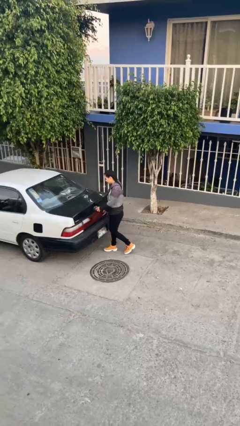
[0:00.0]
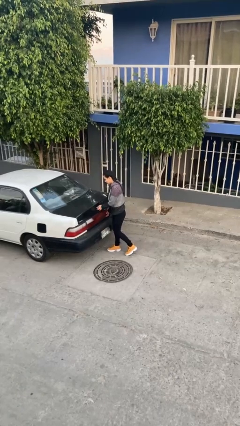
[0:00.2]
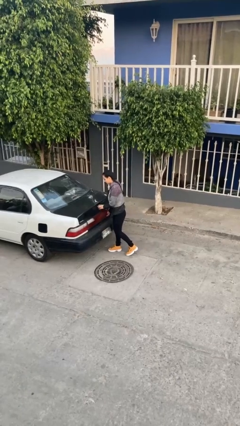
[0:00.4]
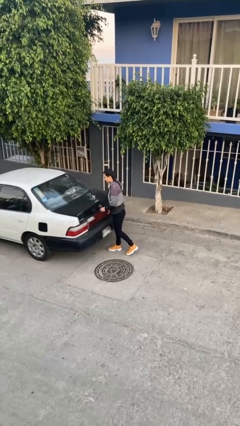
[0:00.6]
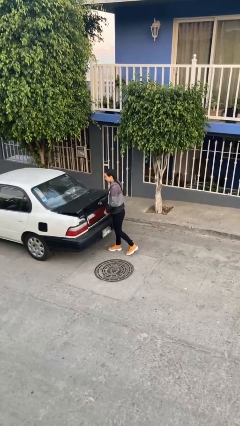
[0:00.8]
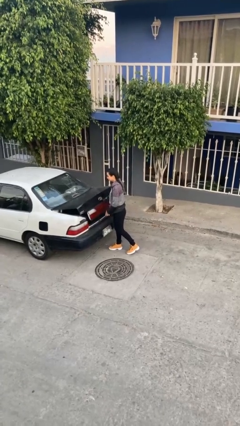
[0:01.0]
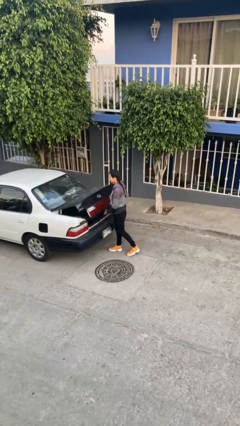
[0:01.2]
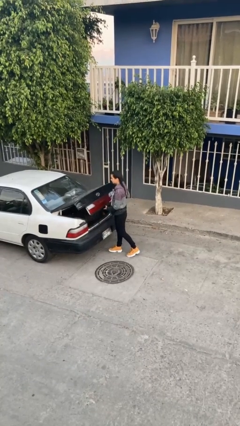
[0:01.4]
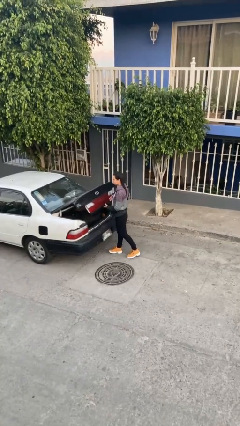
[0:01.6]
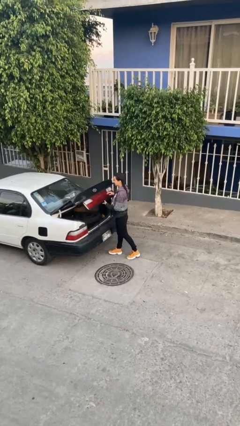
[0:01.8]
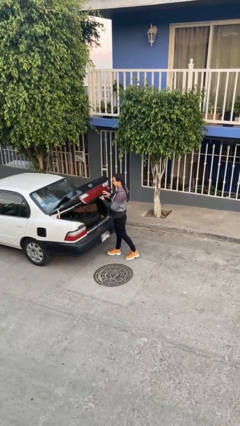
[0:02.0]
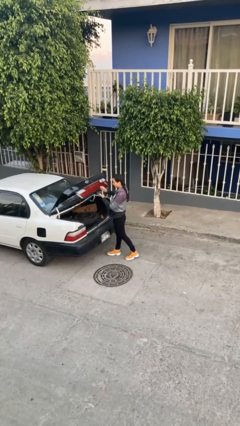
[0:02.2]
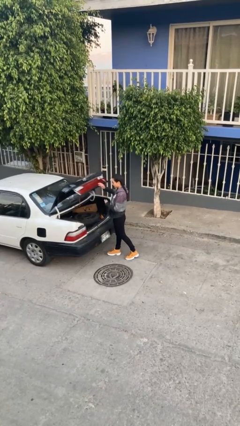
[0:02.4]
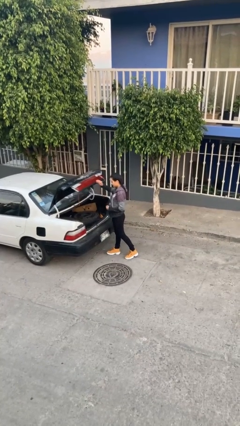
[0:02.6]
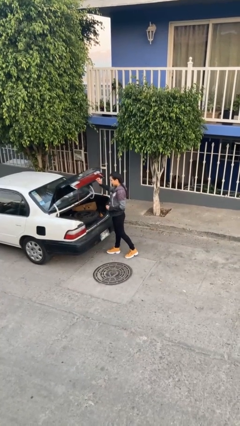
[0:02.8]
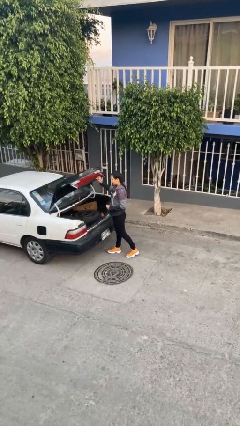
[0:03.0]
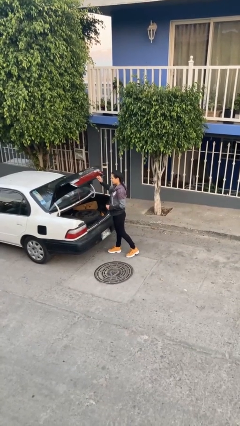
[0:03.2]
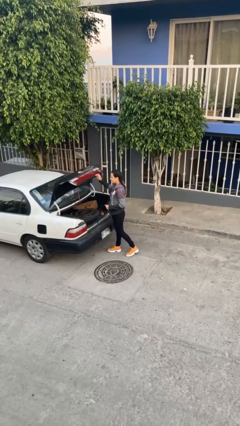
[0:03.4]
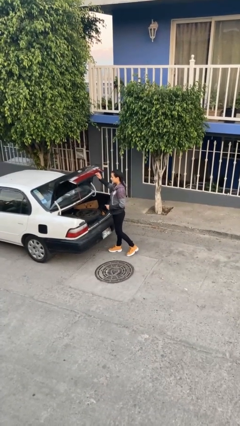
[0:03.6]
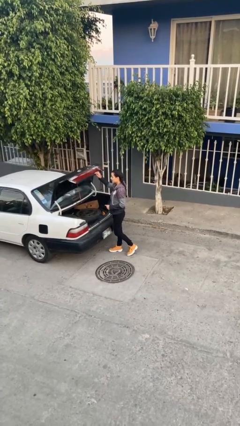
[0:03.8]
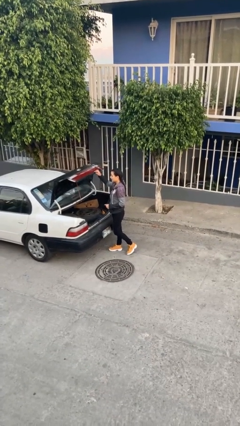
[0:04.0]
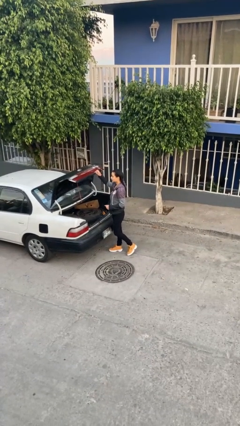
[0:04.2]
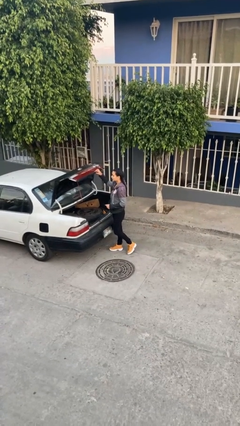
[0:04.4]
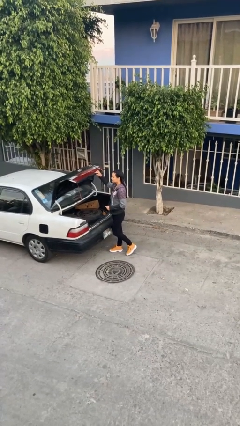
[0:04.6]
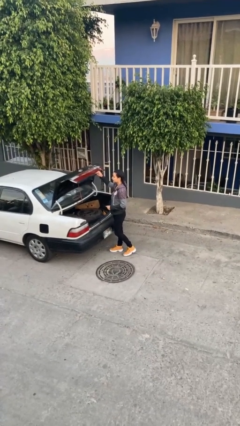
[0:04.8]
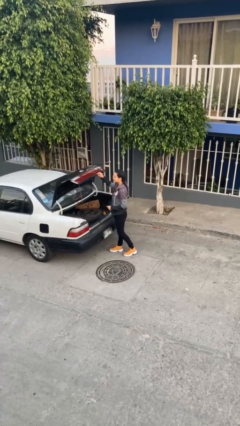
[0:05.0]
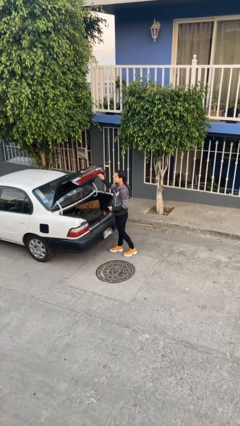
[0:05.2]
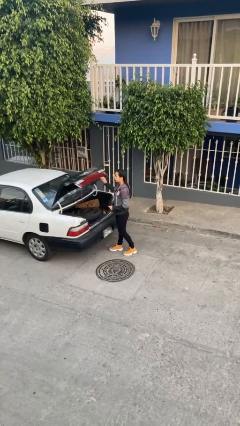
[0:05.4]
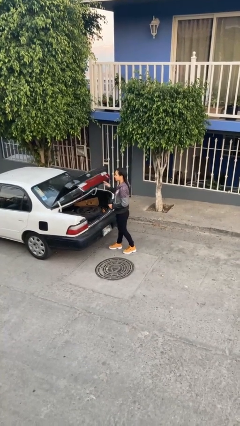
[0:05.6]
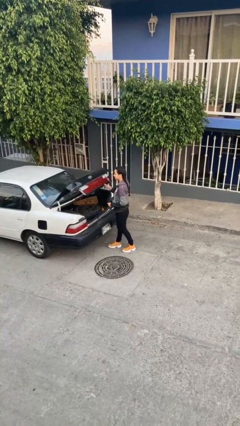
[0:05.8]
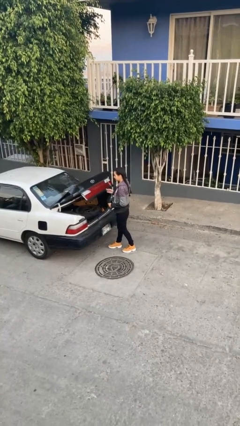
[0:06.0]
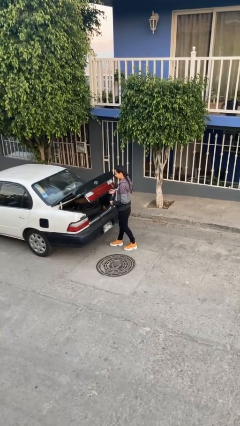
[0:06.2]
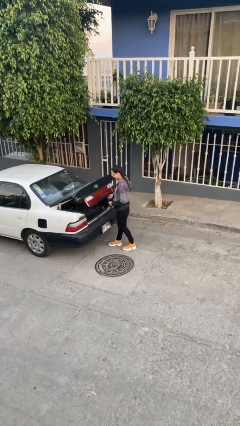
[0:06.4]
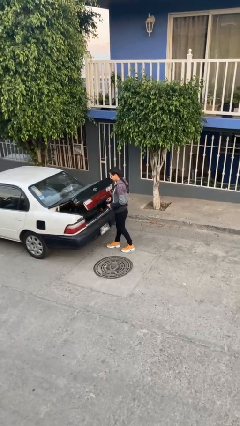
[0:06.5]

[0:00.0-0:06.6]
person opens car trunk

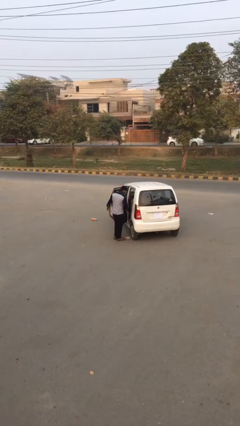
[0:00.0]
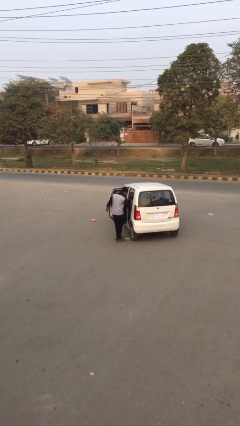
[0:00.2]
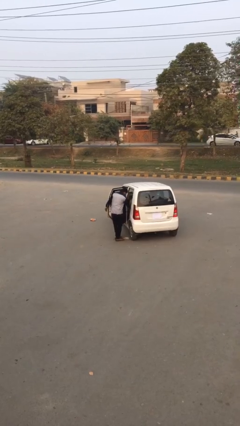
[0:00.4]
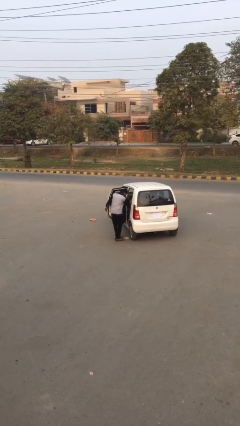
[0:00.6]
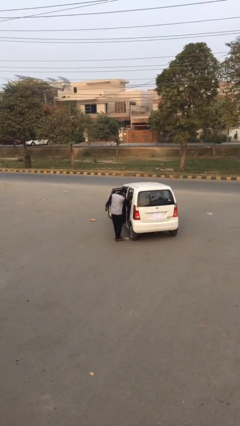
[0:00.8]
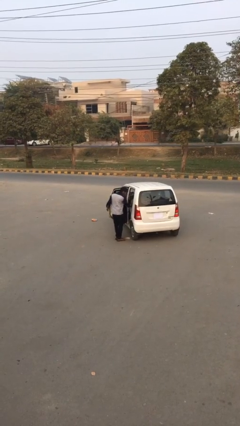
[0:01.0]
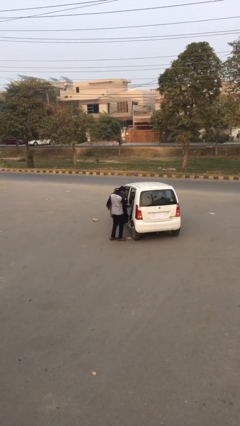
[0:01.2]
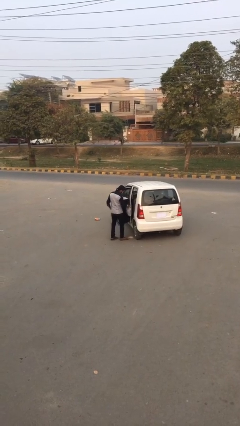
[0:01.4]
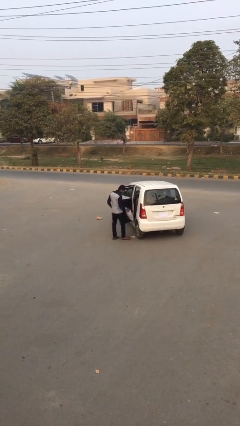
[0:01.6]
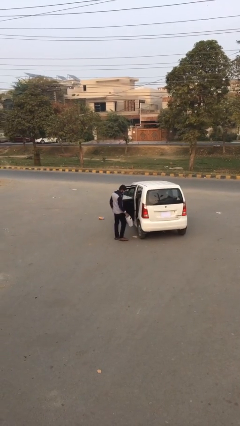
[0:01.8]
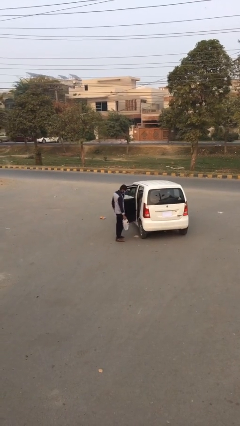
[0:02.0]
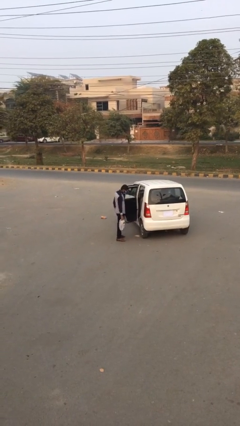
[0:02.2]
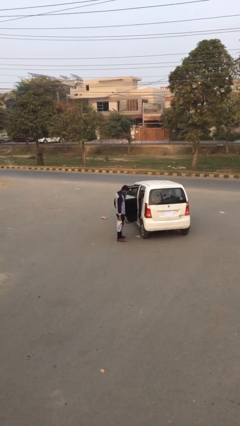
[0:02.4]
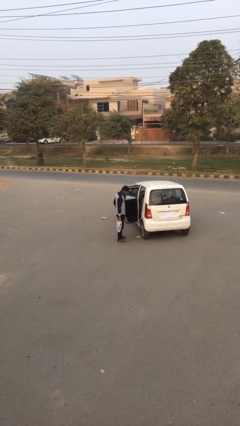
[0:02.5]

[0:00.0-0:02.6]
person unloads car

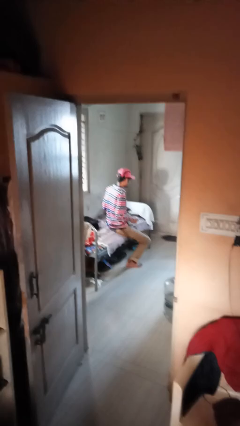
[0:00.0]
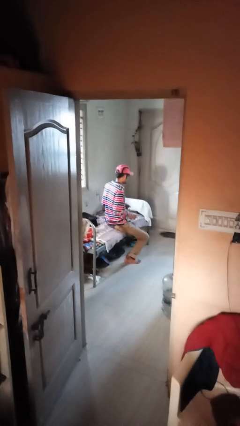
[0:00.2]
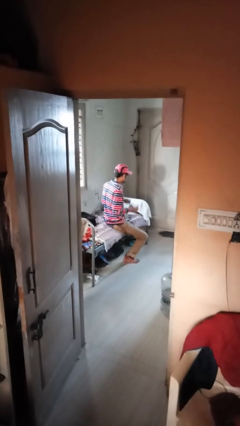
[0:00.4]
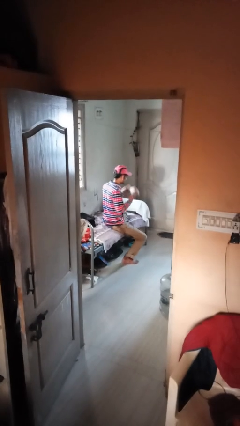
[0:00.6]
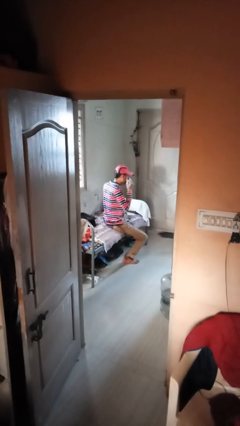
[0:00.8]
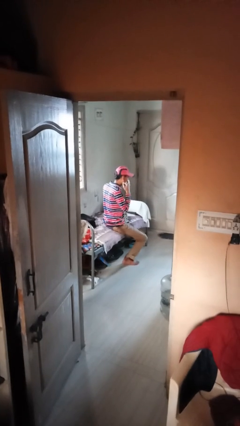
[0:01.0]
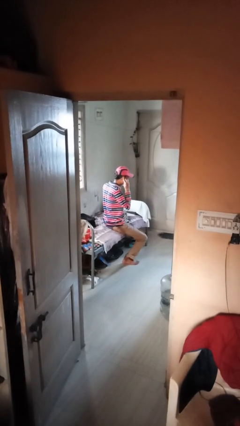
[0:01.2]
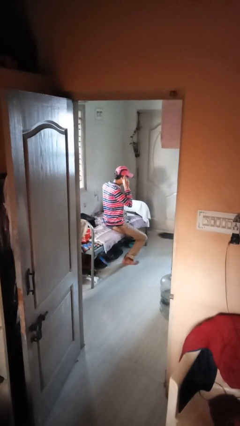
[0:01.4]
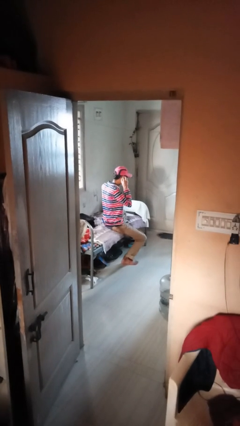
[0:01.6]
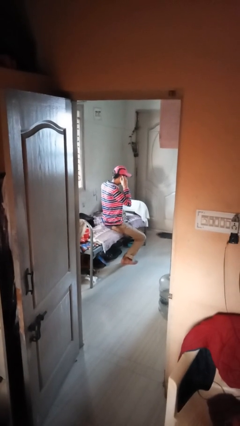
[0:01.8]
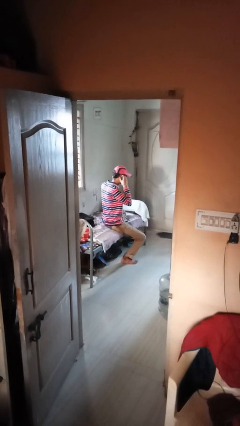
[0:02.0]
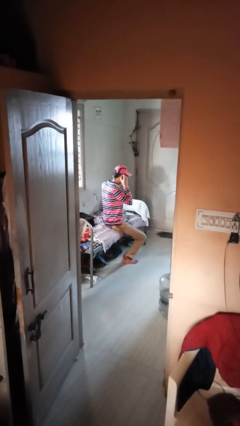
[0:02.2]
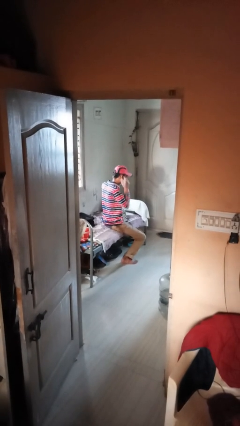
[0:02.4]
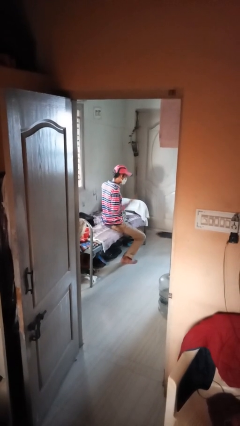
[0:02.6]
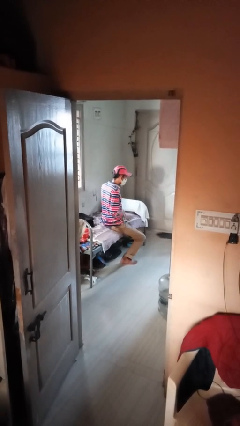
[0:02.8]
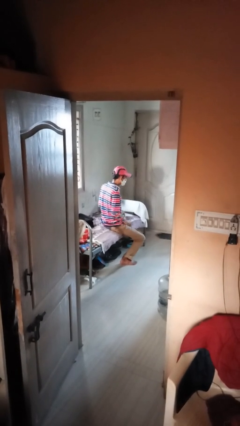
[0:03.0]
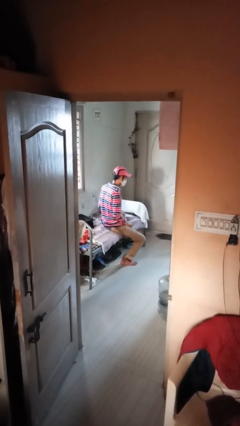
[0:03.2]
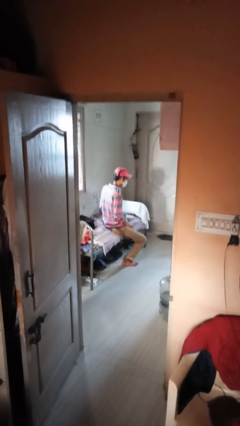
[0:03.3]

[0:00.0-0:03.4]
person puts on facemask

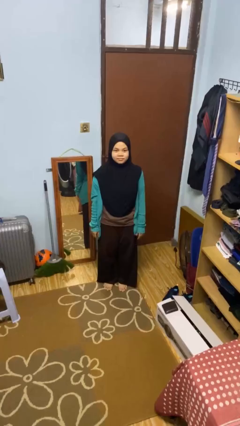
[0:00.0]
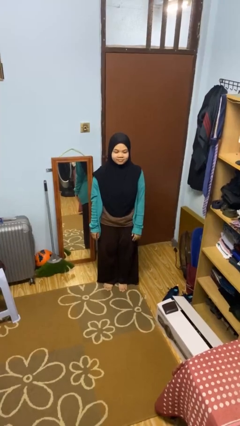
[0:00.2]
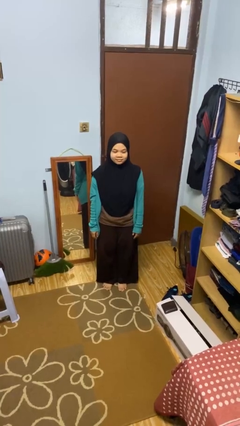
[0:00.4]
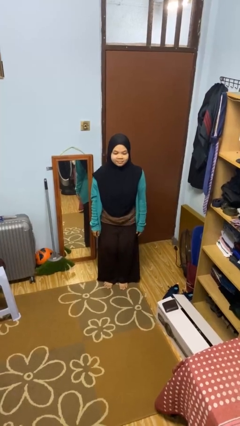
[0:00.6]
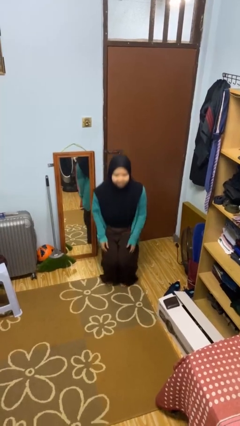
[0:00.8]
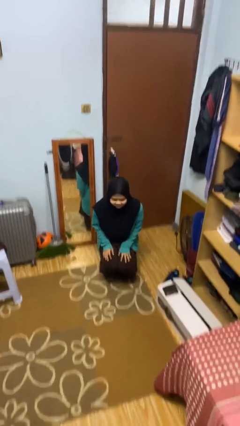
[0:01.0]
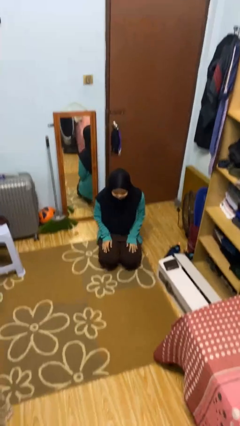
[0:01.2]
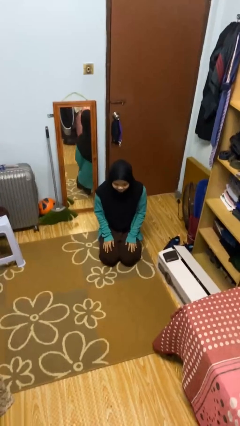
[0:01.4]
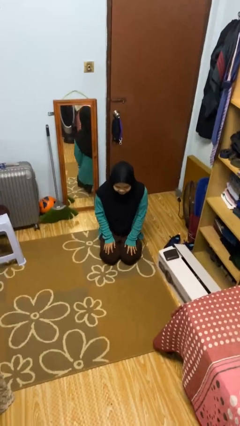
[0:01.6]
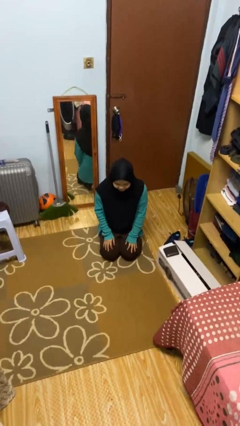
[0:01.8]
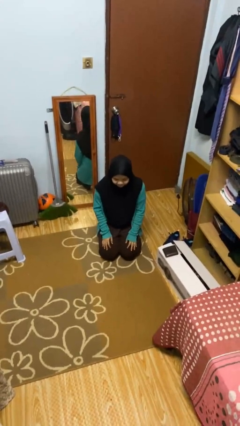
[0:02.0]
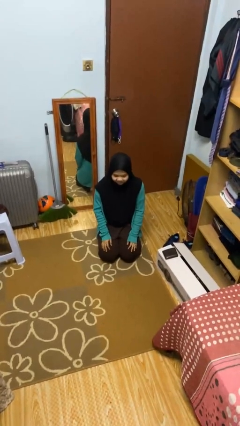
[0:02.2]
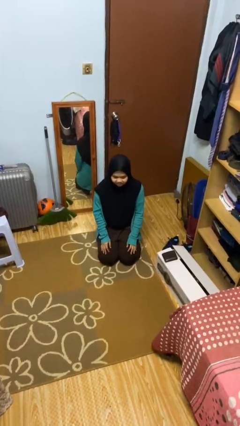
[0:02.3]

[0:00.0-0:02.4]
person kneels

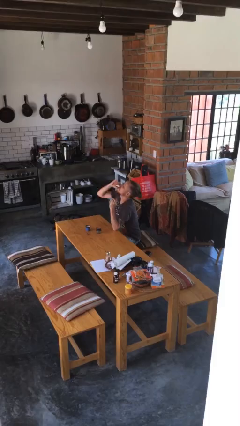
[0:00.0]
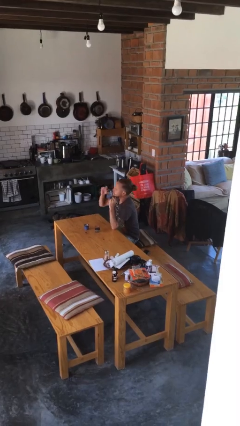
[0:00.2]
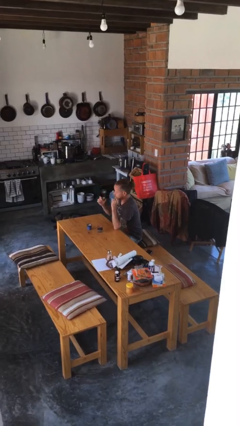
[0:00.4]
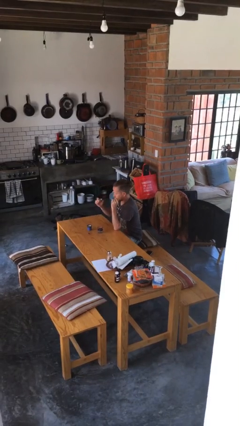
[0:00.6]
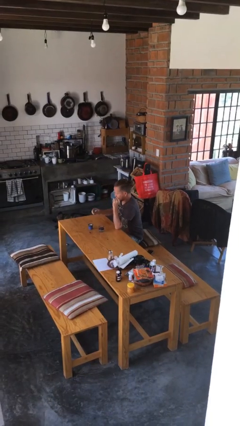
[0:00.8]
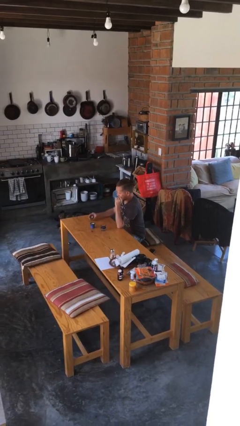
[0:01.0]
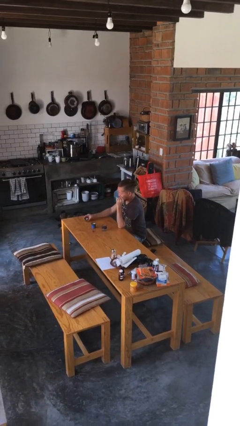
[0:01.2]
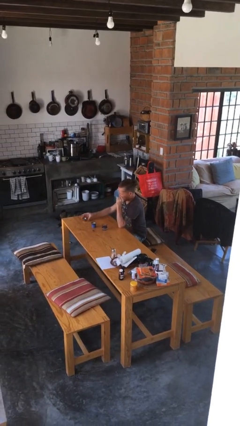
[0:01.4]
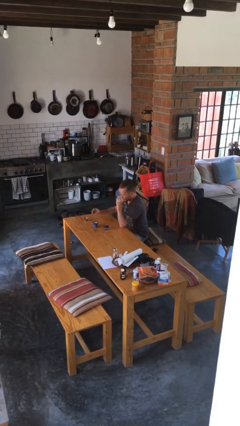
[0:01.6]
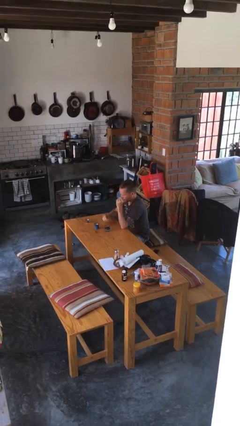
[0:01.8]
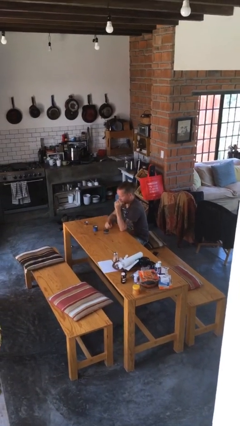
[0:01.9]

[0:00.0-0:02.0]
person puts down object on table

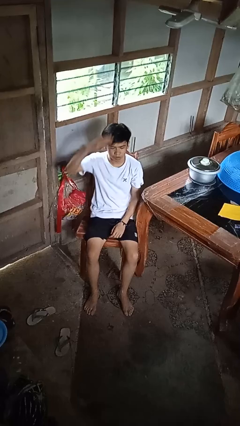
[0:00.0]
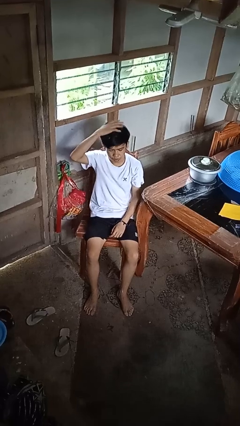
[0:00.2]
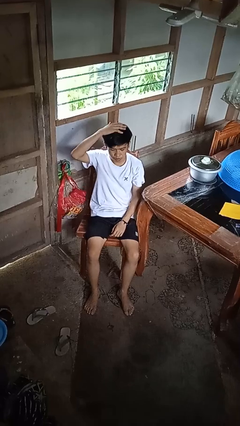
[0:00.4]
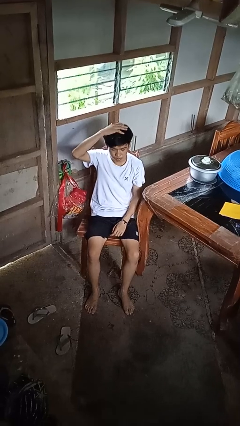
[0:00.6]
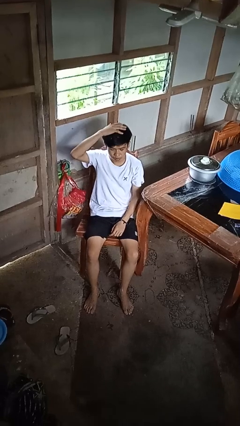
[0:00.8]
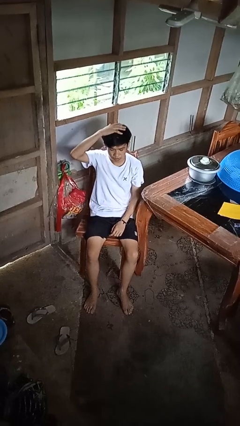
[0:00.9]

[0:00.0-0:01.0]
person pats head
